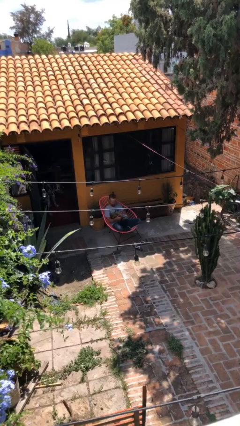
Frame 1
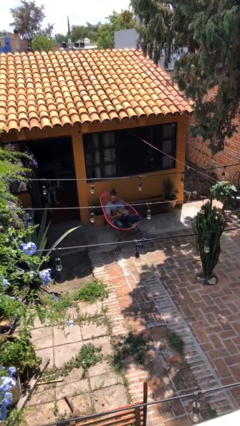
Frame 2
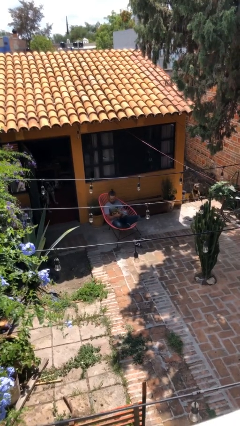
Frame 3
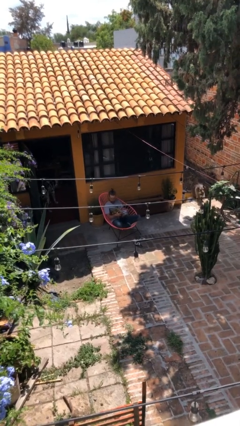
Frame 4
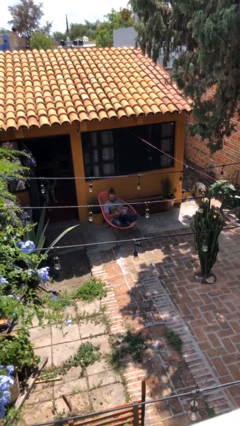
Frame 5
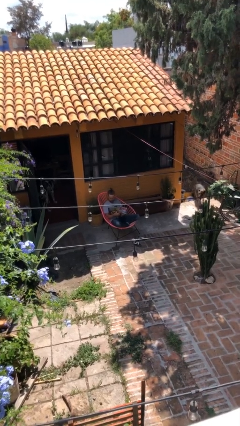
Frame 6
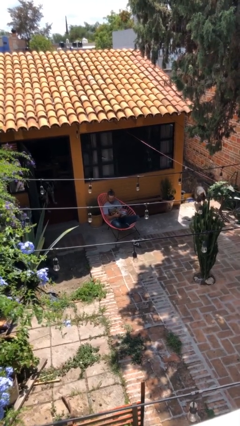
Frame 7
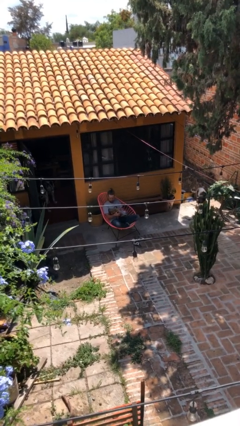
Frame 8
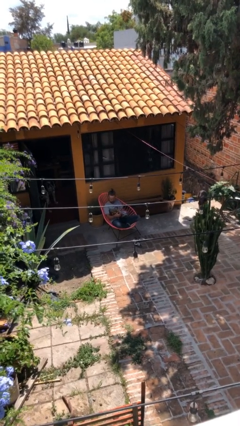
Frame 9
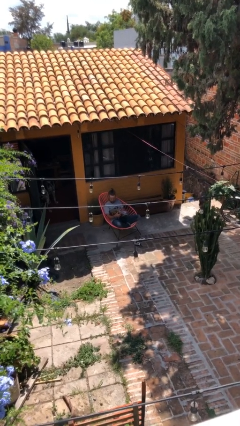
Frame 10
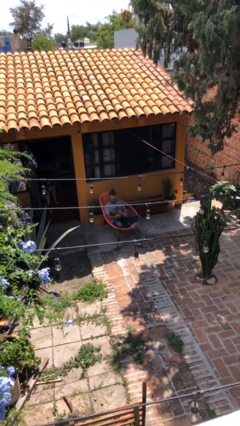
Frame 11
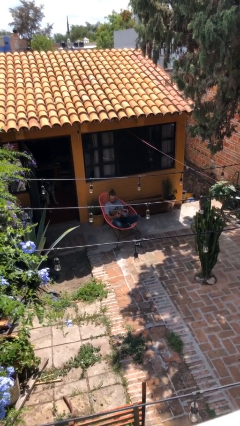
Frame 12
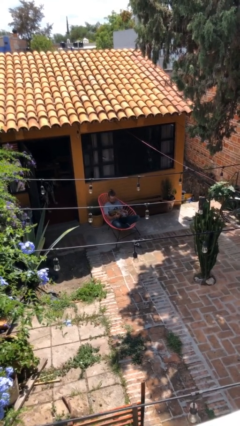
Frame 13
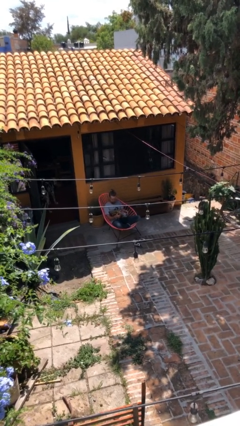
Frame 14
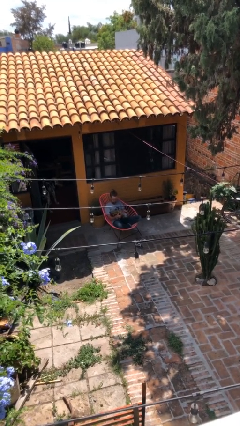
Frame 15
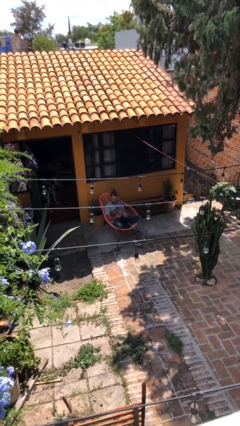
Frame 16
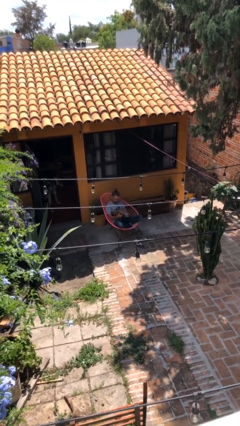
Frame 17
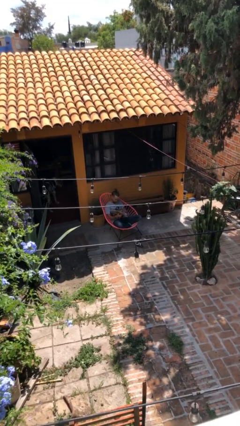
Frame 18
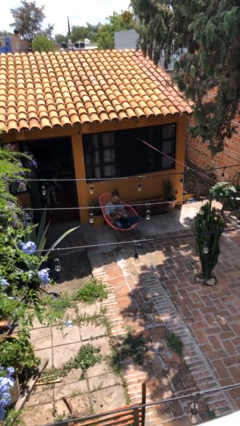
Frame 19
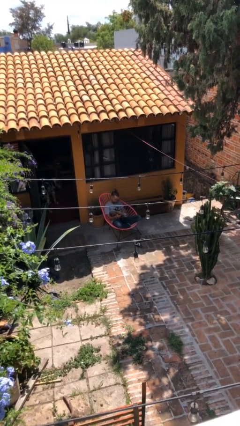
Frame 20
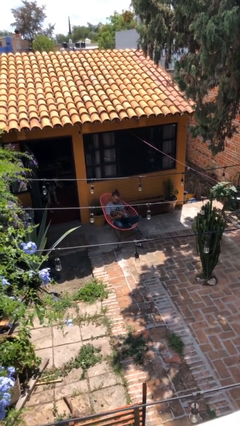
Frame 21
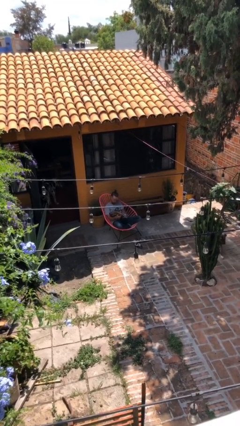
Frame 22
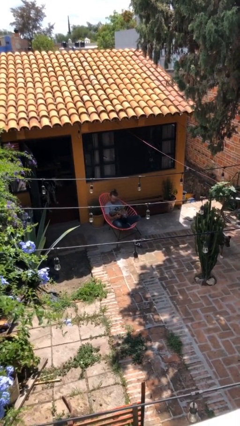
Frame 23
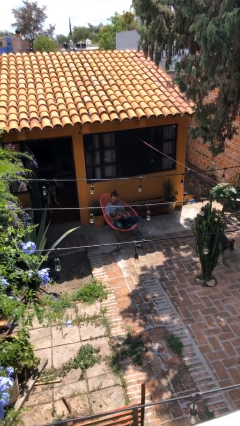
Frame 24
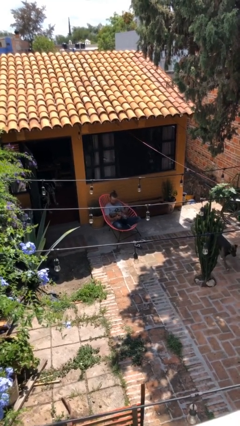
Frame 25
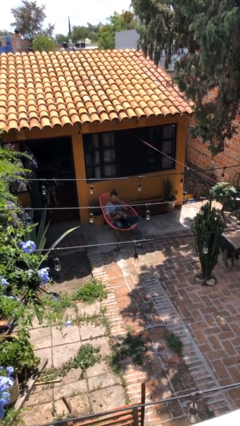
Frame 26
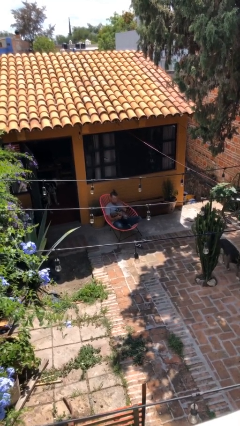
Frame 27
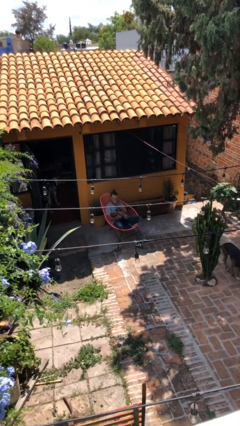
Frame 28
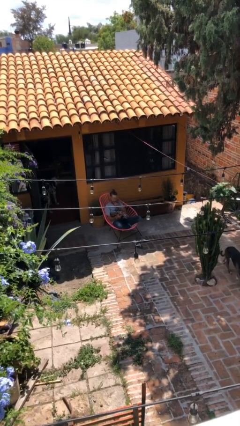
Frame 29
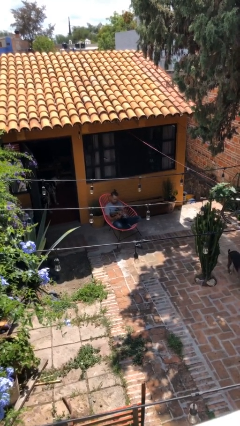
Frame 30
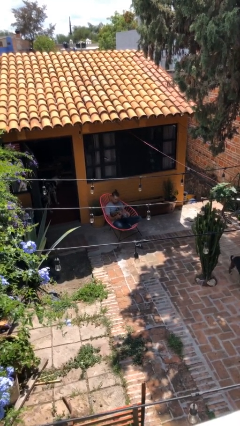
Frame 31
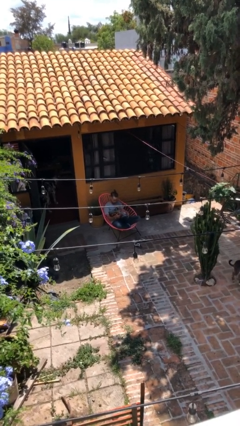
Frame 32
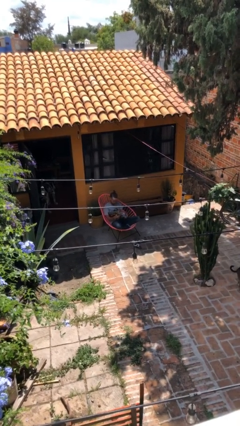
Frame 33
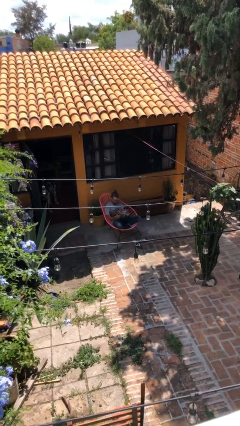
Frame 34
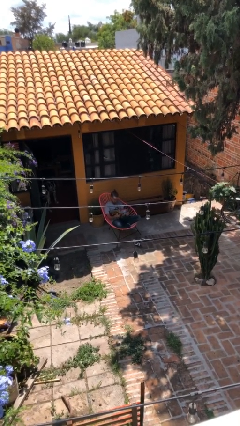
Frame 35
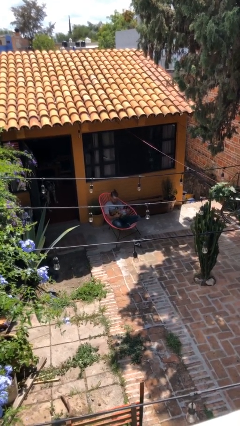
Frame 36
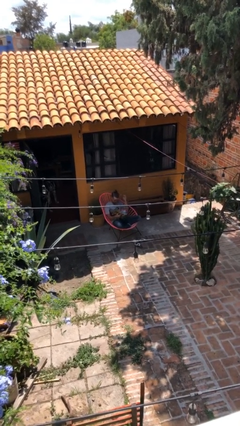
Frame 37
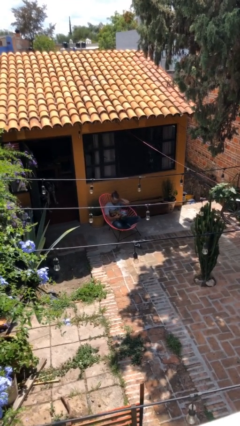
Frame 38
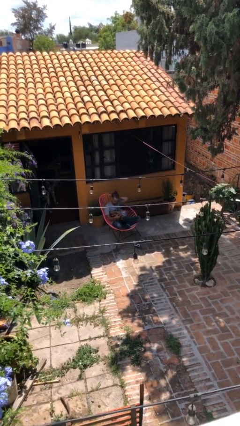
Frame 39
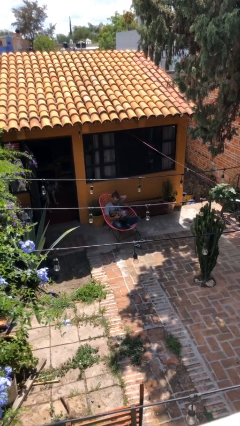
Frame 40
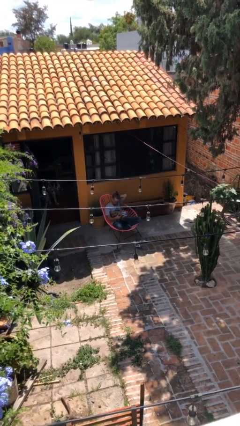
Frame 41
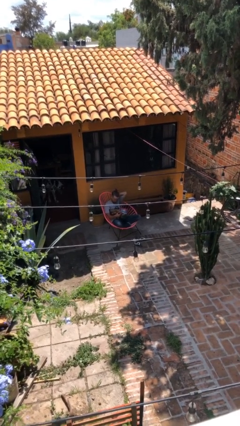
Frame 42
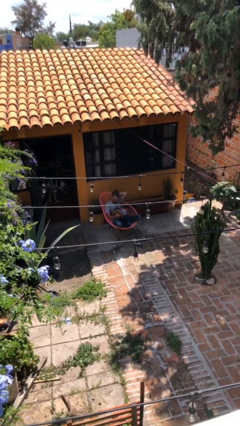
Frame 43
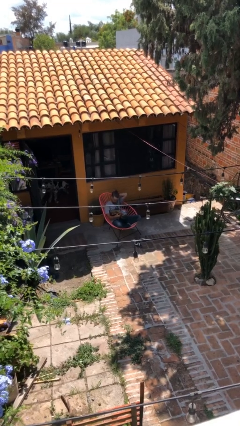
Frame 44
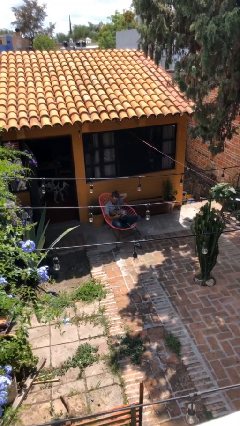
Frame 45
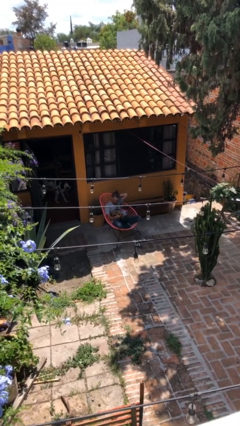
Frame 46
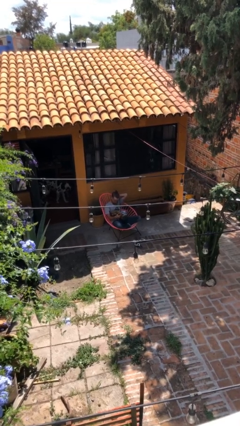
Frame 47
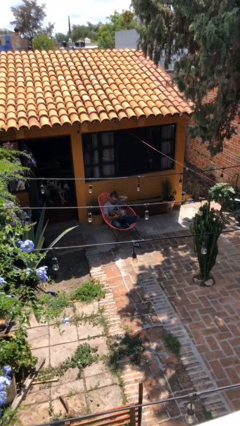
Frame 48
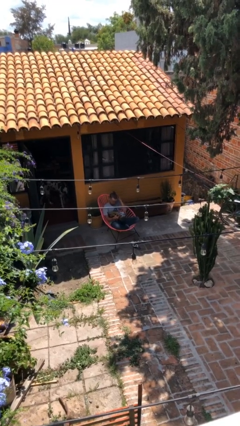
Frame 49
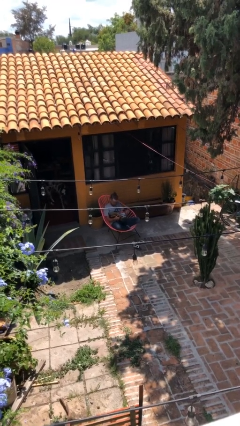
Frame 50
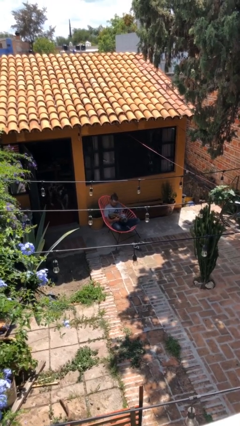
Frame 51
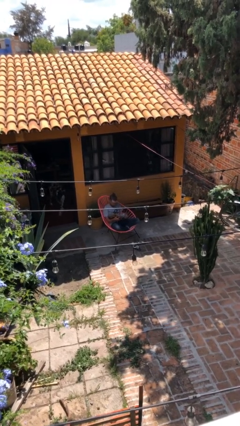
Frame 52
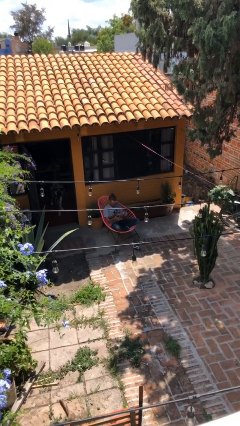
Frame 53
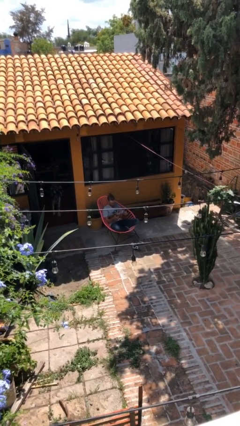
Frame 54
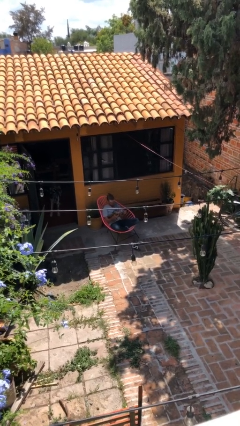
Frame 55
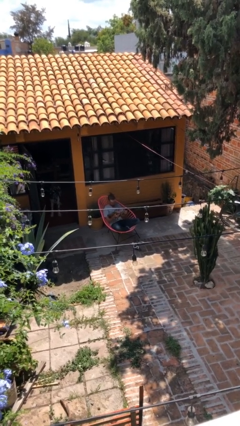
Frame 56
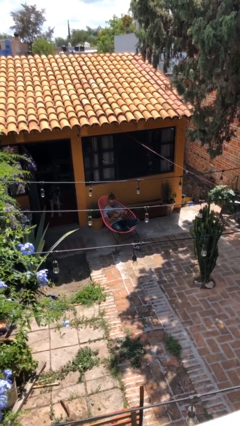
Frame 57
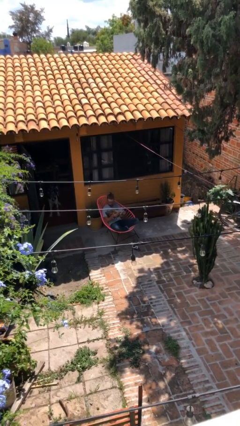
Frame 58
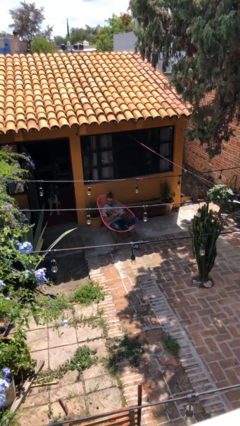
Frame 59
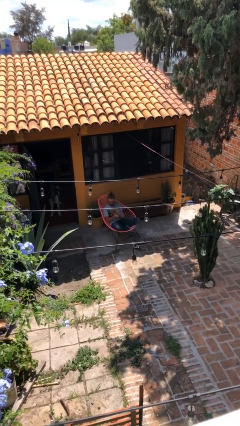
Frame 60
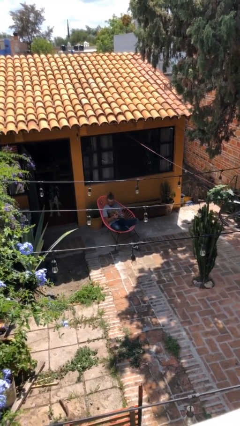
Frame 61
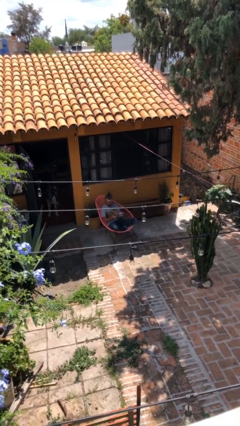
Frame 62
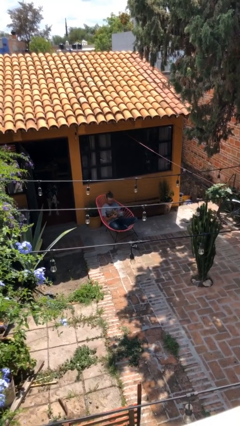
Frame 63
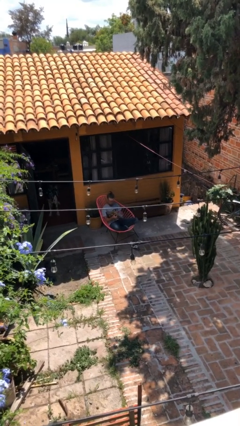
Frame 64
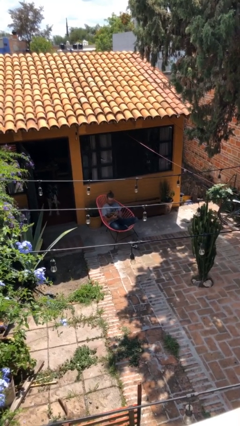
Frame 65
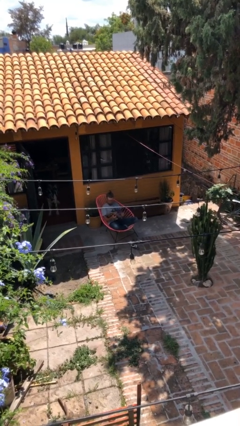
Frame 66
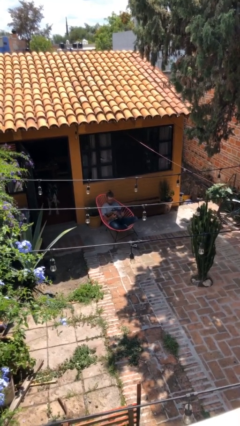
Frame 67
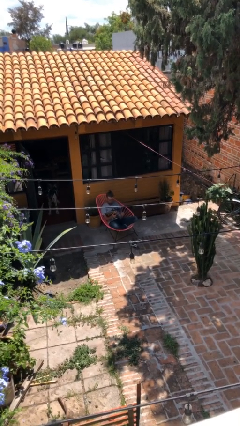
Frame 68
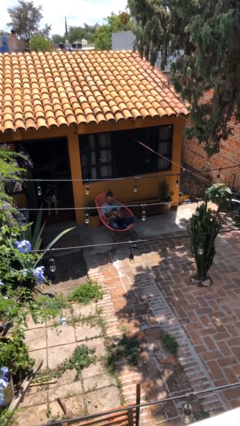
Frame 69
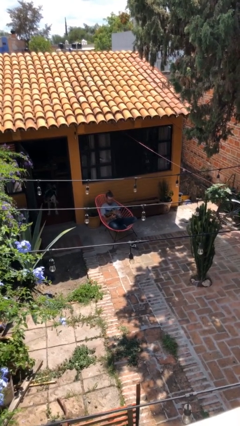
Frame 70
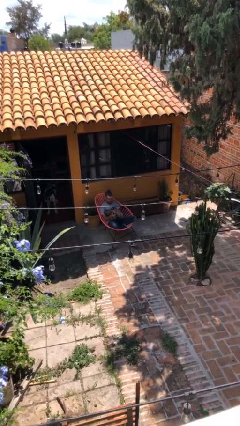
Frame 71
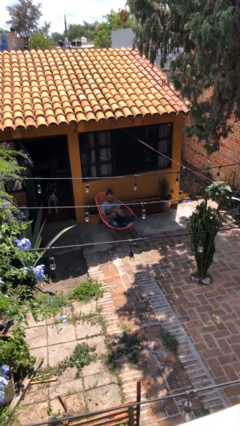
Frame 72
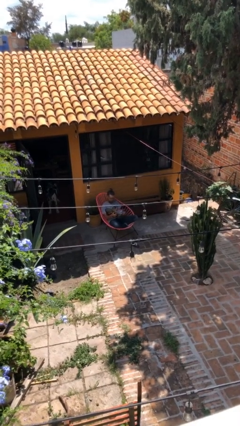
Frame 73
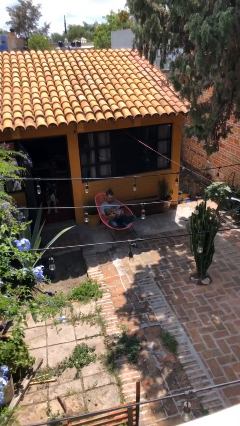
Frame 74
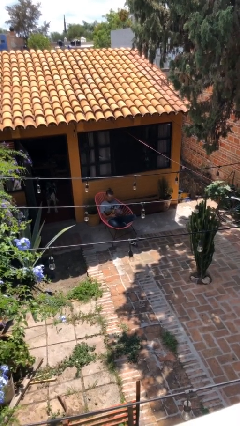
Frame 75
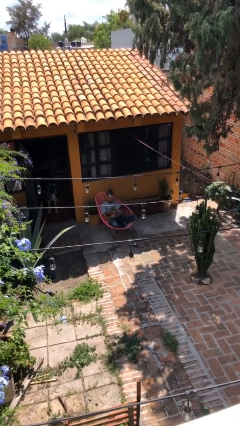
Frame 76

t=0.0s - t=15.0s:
person reads document

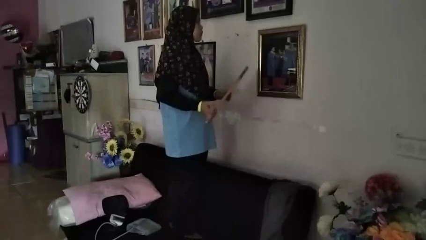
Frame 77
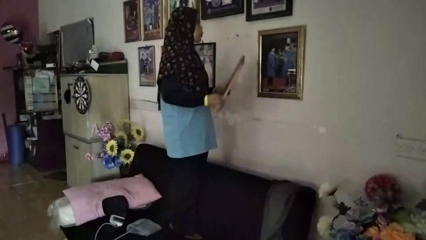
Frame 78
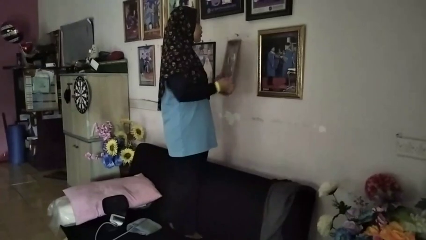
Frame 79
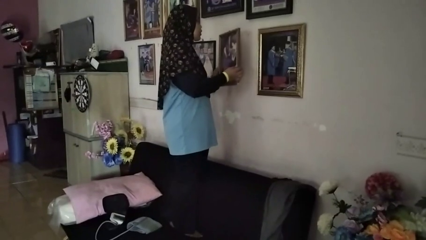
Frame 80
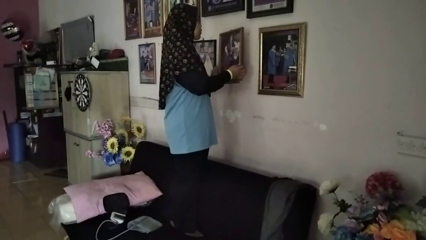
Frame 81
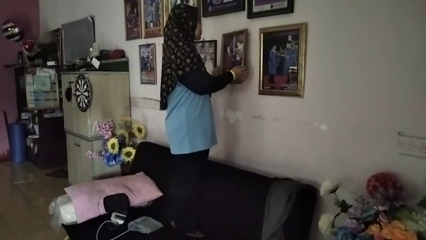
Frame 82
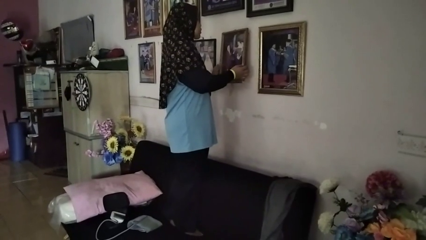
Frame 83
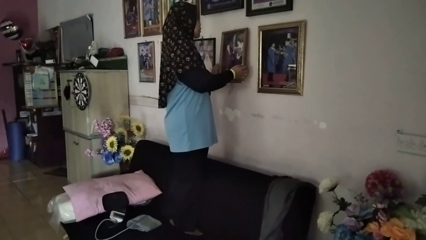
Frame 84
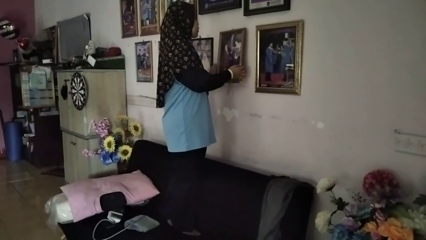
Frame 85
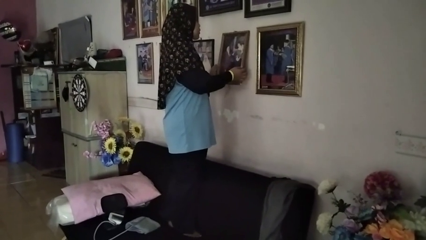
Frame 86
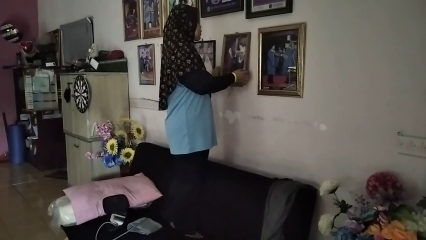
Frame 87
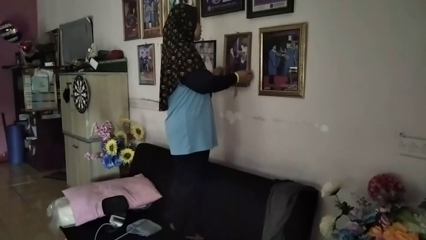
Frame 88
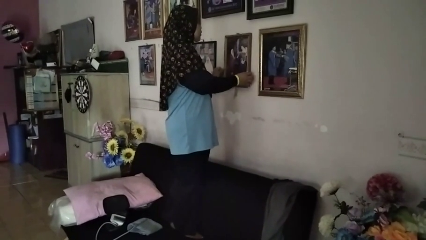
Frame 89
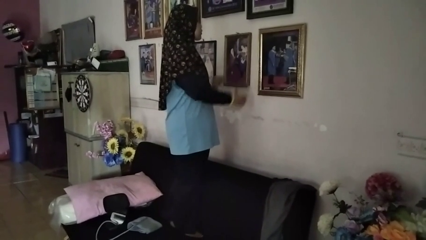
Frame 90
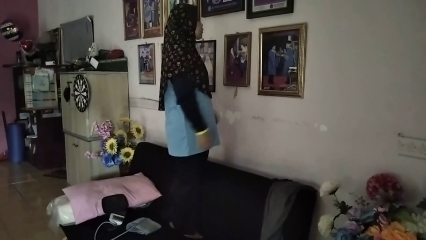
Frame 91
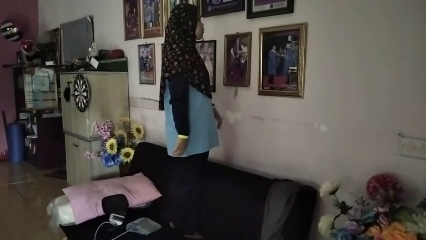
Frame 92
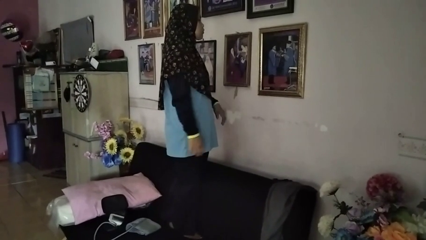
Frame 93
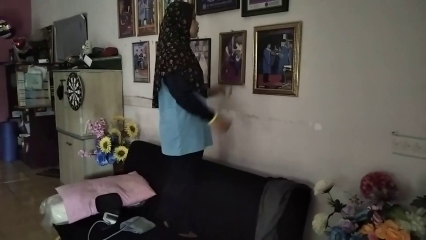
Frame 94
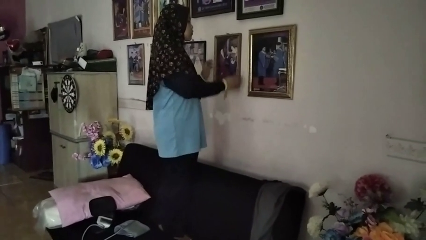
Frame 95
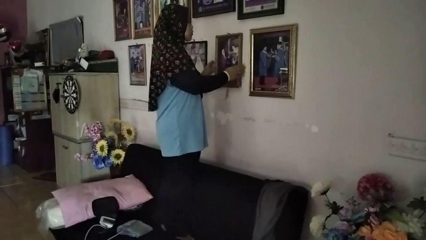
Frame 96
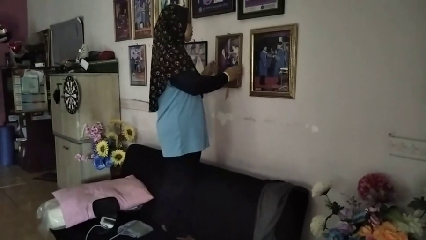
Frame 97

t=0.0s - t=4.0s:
person puts up picture frame
